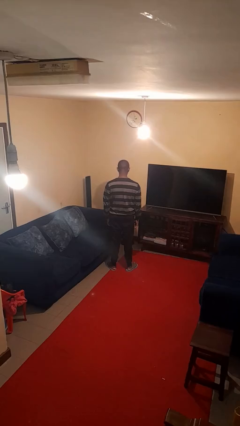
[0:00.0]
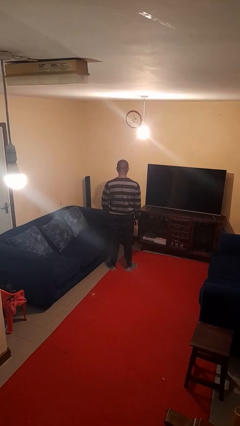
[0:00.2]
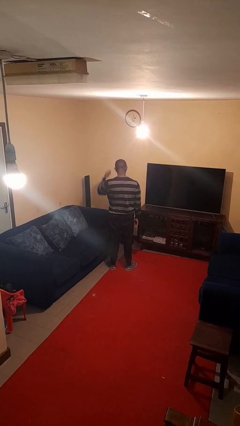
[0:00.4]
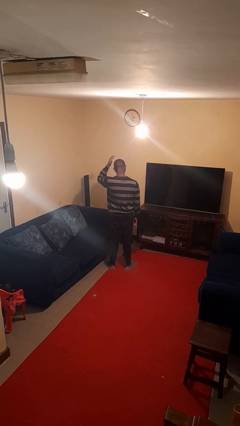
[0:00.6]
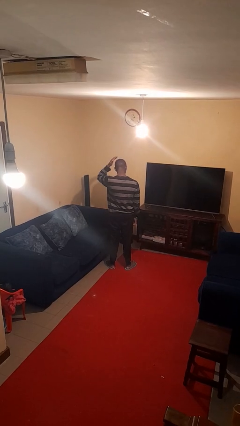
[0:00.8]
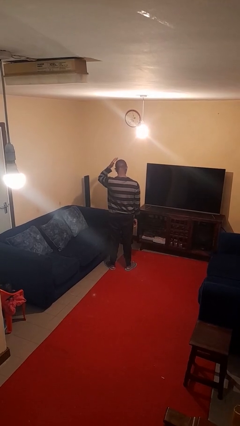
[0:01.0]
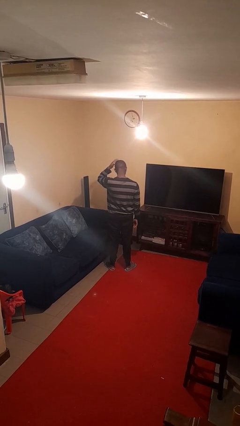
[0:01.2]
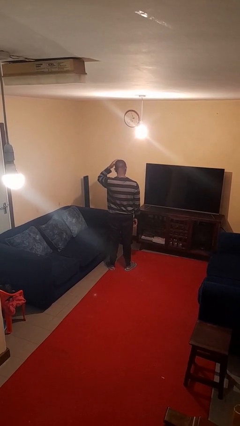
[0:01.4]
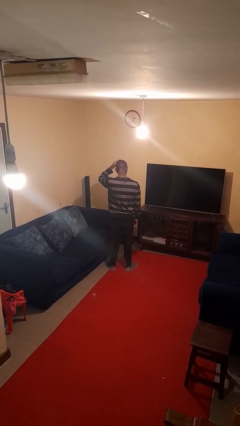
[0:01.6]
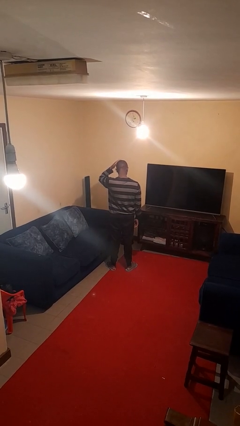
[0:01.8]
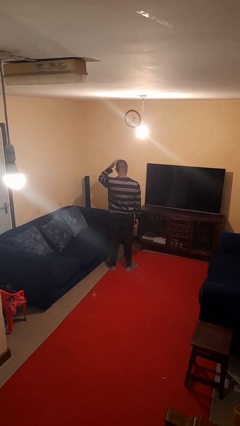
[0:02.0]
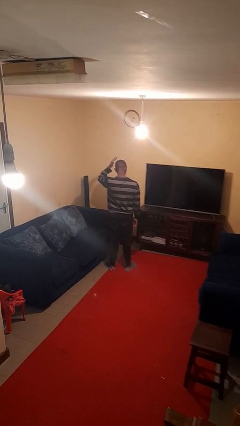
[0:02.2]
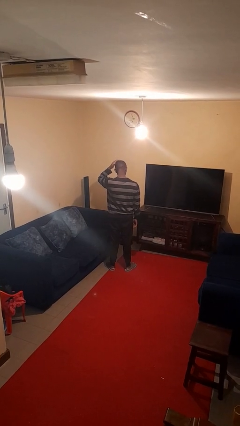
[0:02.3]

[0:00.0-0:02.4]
person pats head

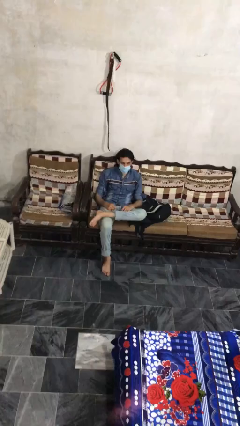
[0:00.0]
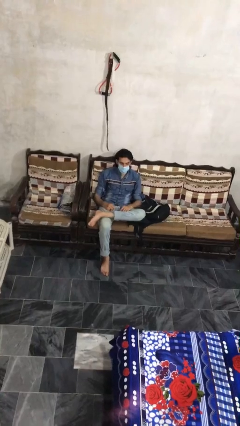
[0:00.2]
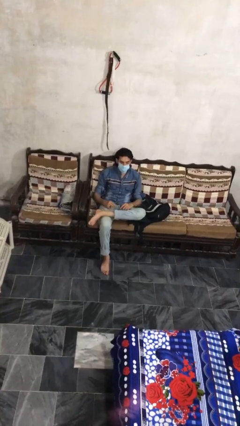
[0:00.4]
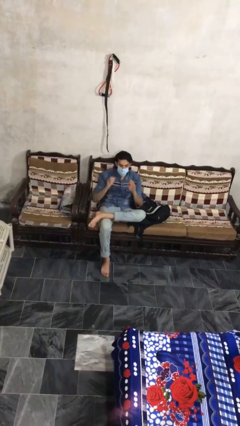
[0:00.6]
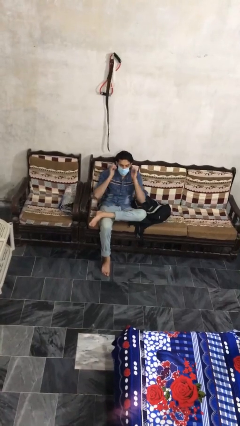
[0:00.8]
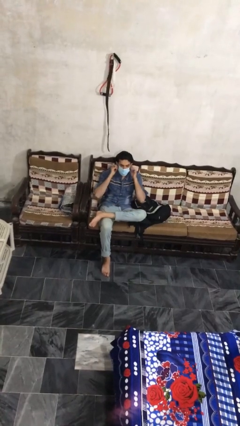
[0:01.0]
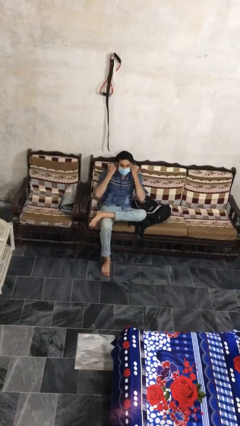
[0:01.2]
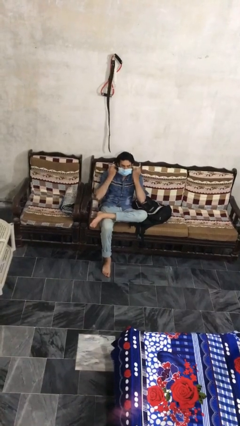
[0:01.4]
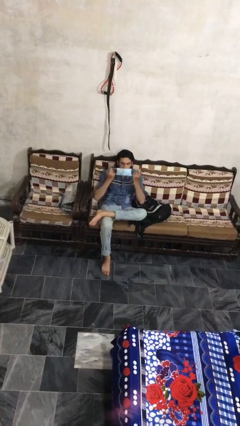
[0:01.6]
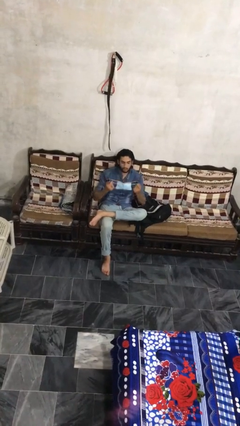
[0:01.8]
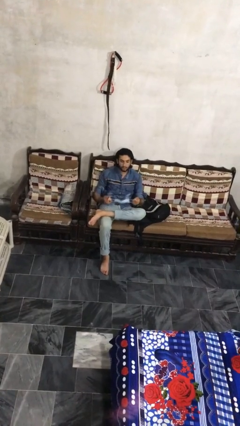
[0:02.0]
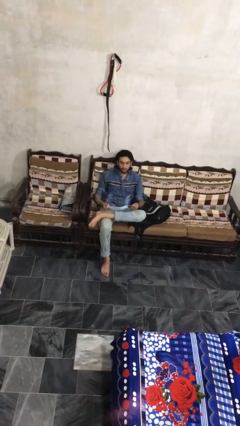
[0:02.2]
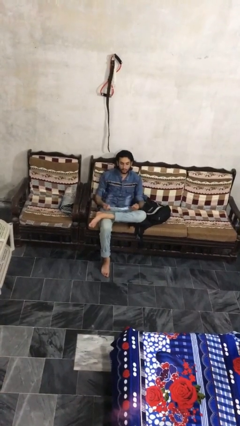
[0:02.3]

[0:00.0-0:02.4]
person takes off facemask

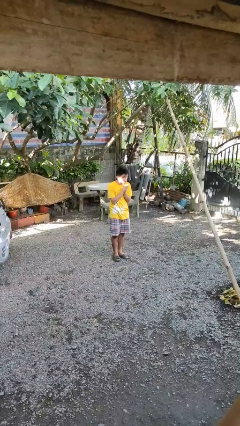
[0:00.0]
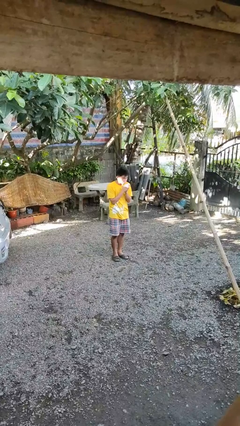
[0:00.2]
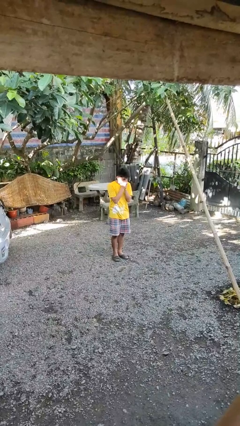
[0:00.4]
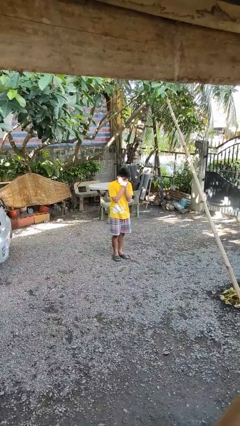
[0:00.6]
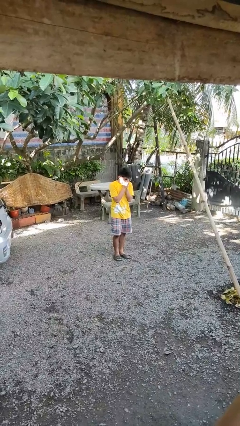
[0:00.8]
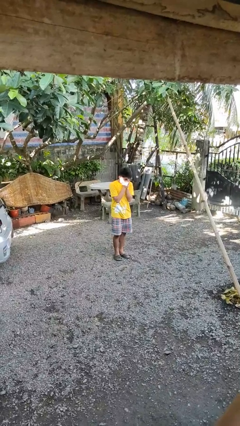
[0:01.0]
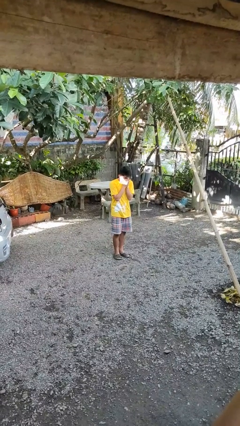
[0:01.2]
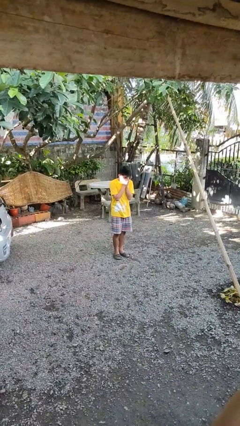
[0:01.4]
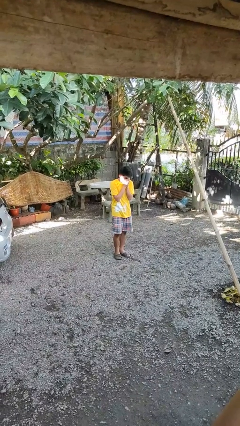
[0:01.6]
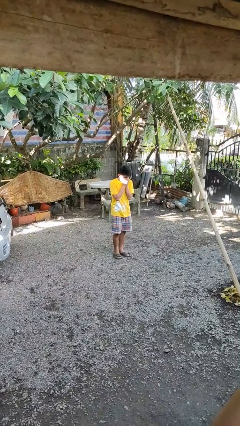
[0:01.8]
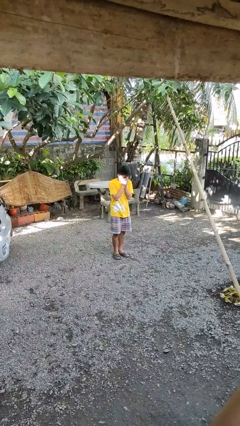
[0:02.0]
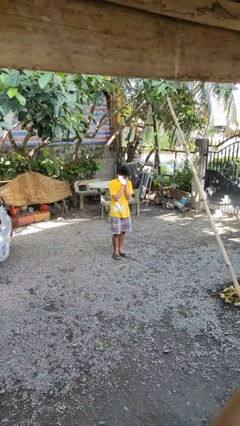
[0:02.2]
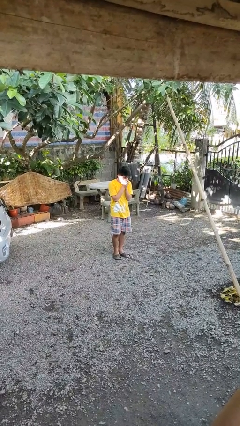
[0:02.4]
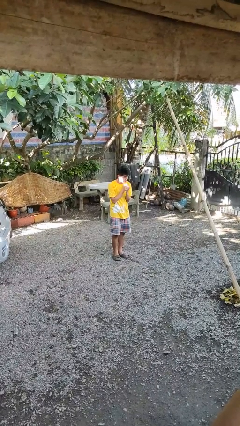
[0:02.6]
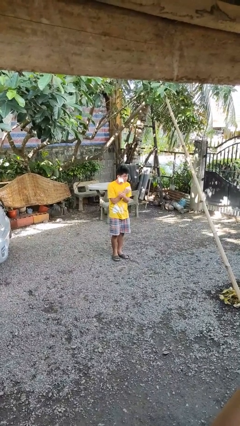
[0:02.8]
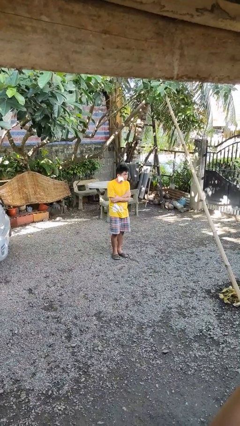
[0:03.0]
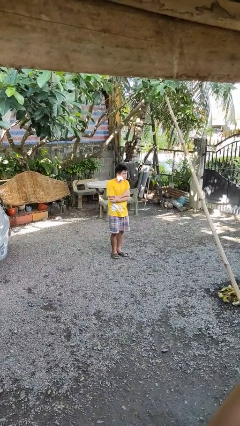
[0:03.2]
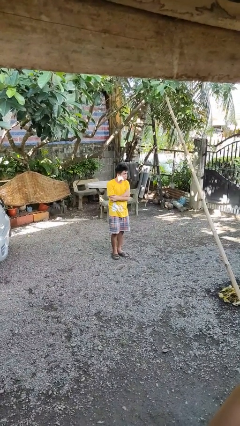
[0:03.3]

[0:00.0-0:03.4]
person blows into hands

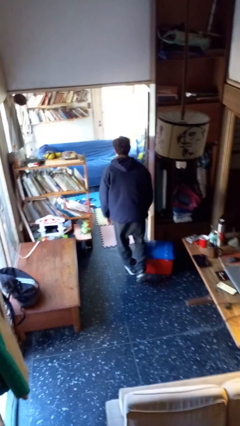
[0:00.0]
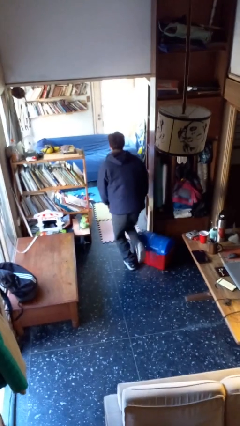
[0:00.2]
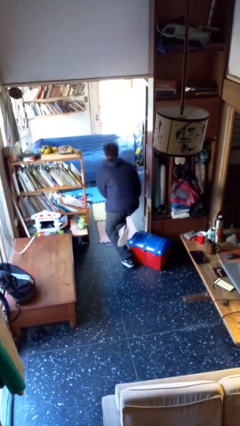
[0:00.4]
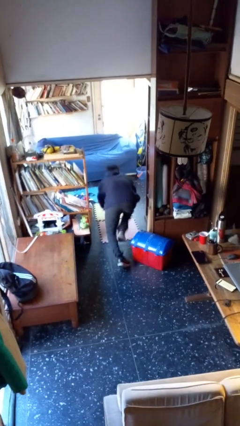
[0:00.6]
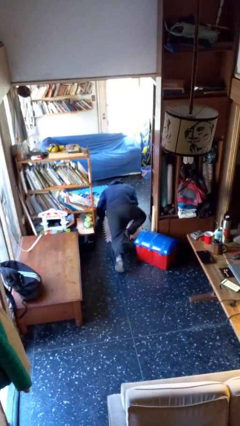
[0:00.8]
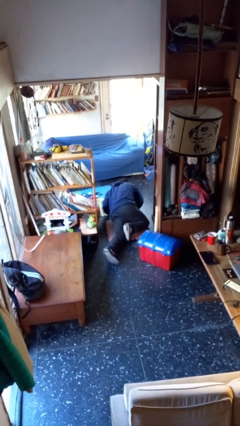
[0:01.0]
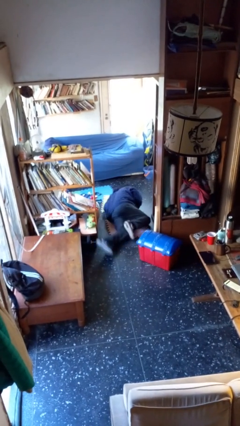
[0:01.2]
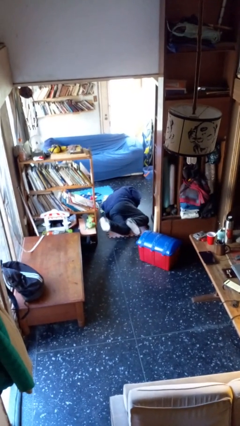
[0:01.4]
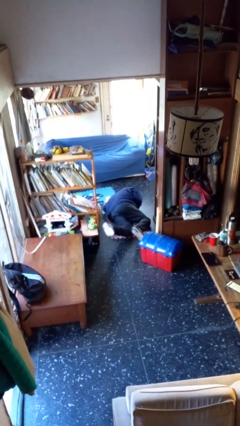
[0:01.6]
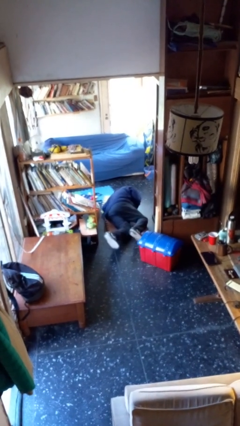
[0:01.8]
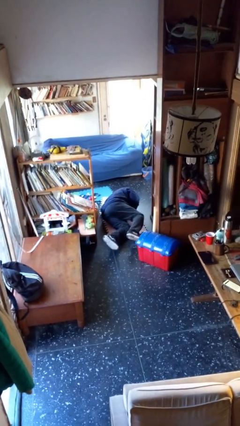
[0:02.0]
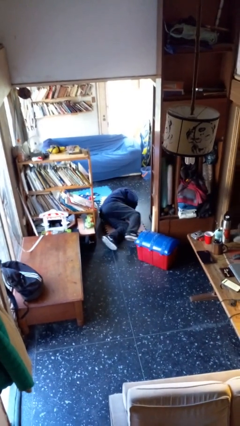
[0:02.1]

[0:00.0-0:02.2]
person trips on object on floor

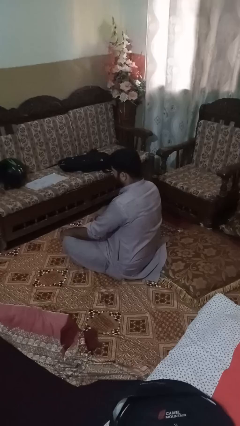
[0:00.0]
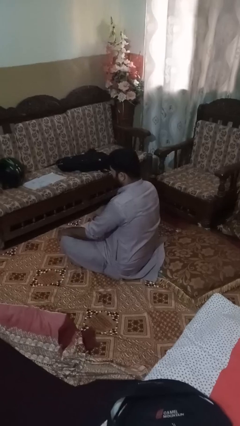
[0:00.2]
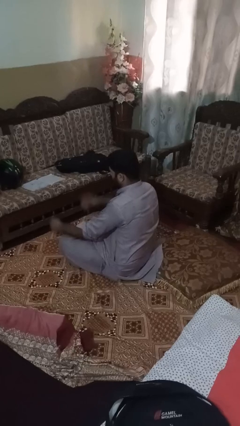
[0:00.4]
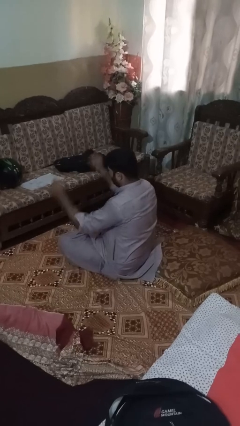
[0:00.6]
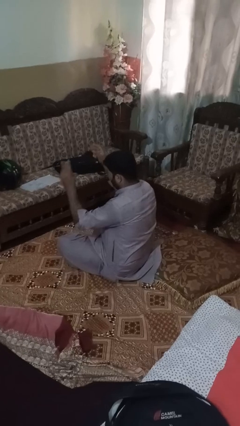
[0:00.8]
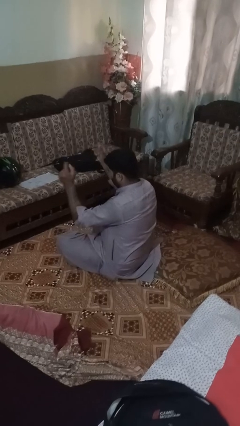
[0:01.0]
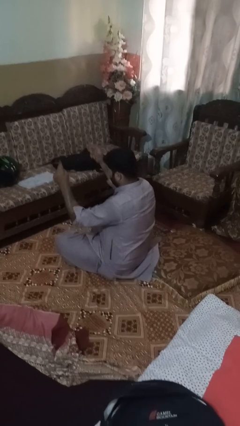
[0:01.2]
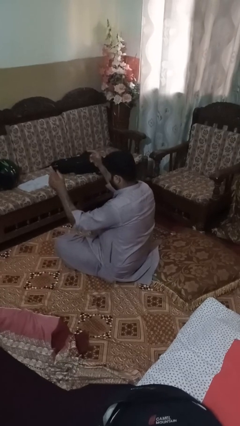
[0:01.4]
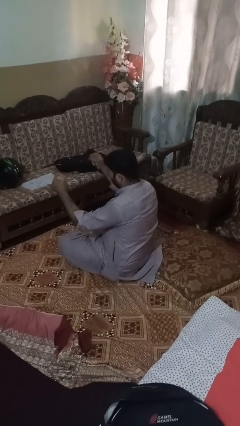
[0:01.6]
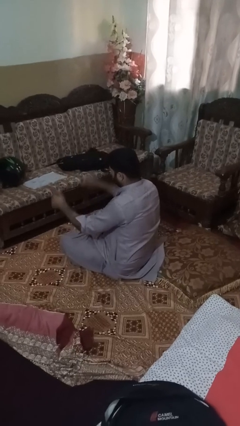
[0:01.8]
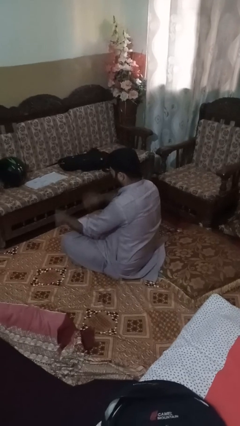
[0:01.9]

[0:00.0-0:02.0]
person snaps fingers

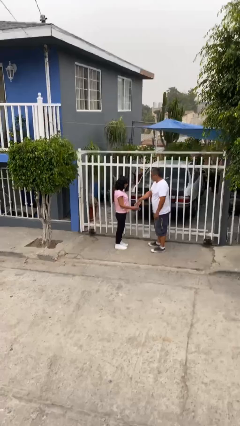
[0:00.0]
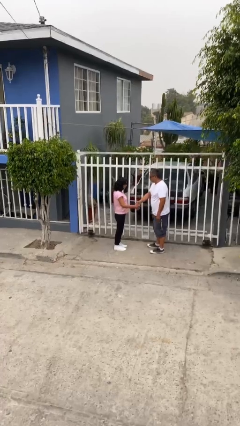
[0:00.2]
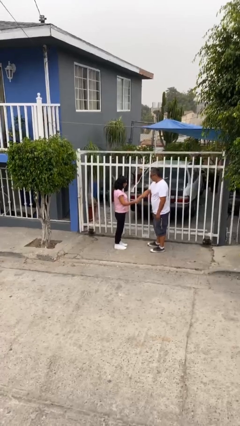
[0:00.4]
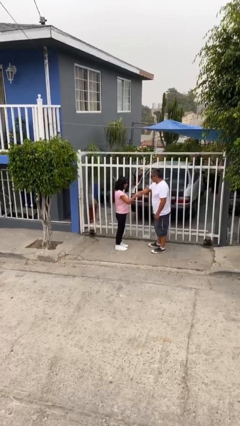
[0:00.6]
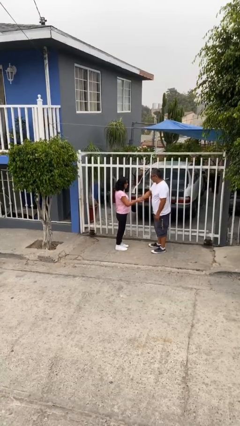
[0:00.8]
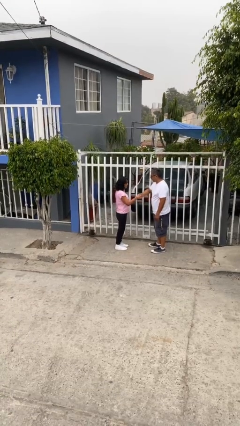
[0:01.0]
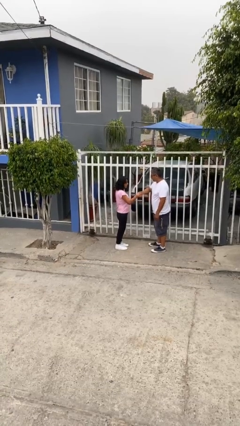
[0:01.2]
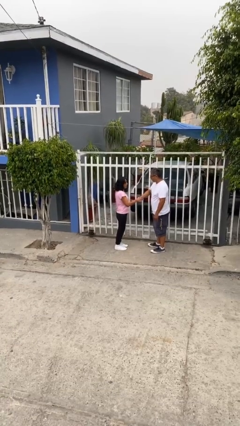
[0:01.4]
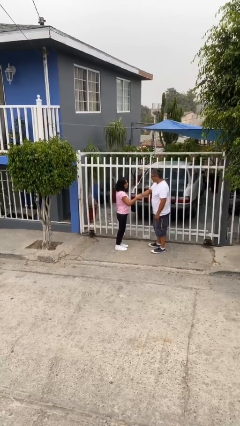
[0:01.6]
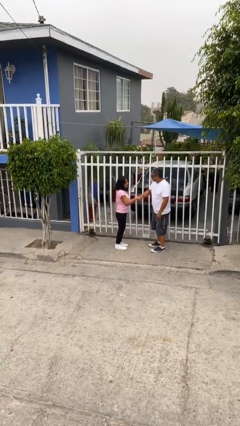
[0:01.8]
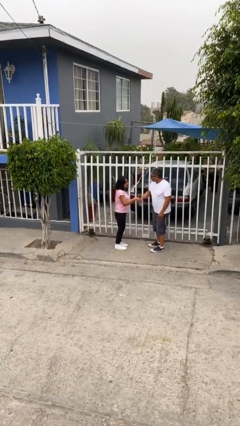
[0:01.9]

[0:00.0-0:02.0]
person shakes hand

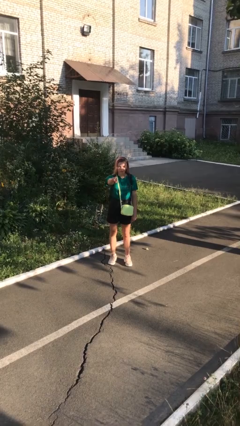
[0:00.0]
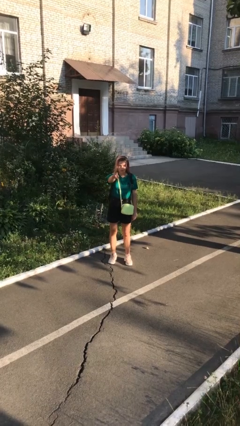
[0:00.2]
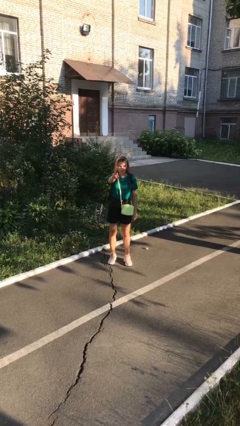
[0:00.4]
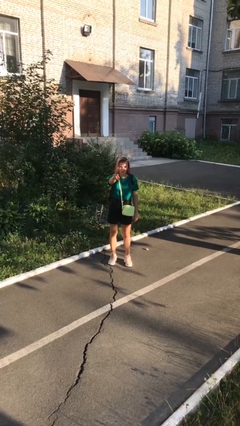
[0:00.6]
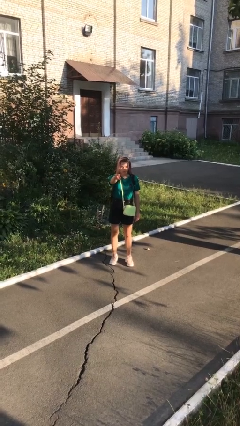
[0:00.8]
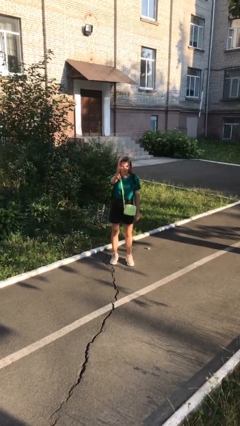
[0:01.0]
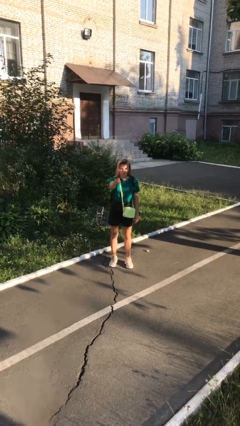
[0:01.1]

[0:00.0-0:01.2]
person points at person

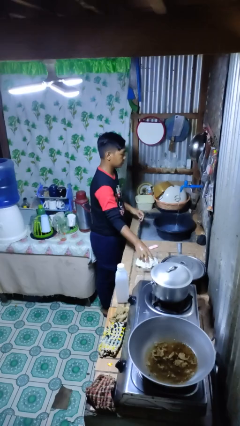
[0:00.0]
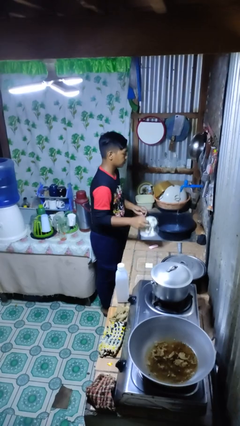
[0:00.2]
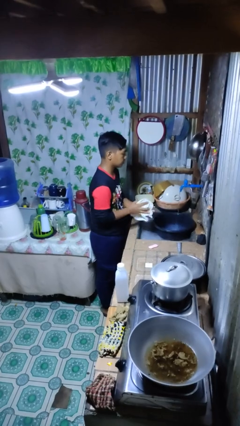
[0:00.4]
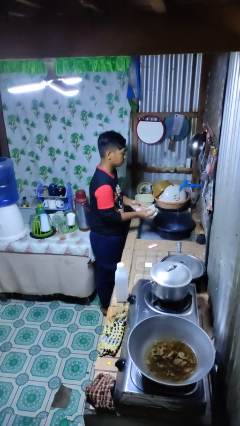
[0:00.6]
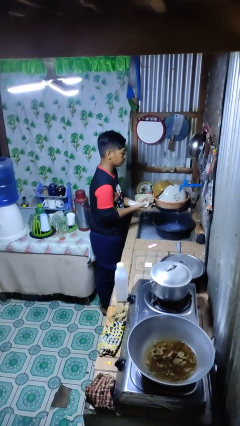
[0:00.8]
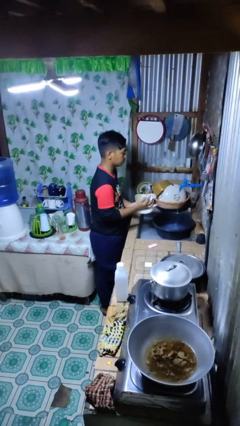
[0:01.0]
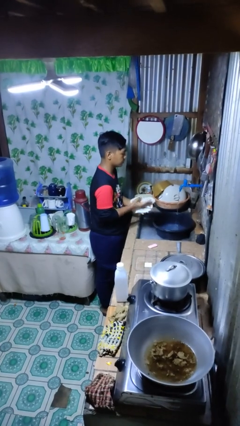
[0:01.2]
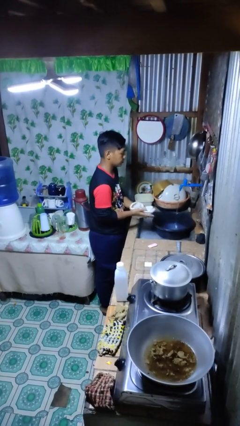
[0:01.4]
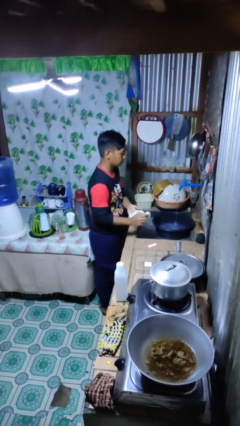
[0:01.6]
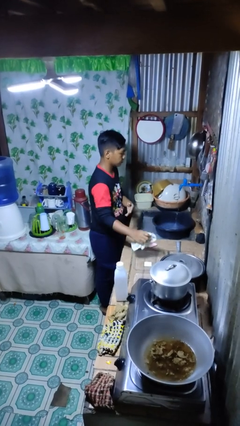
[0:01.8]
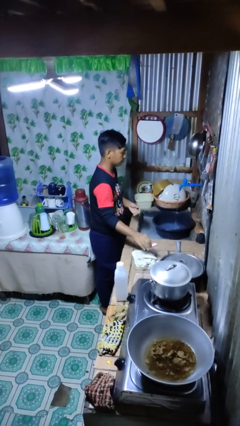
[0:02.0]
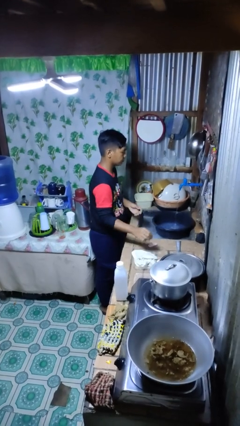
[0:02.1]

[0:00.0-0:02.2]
person dries hands with towel
